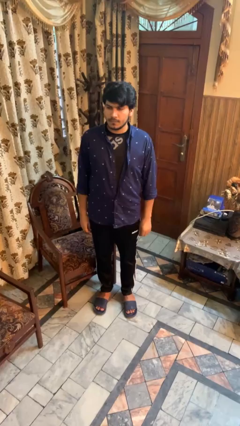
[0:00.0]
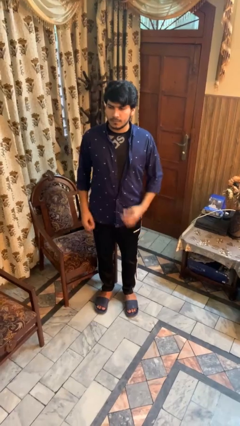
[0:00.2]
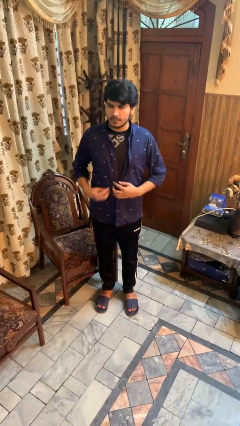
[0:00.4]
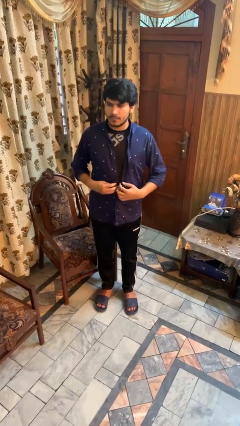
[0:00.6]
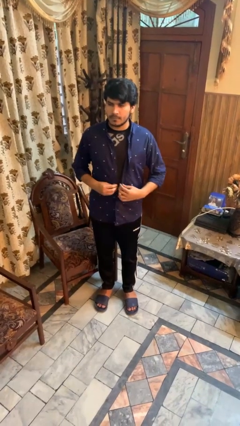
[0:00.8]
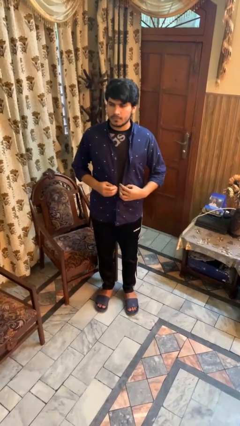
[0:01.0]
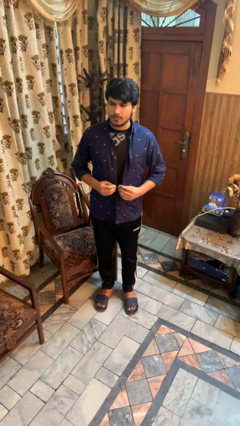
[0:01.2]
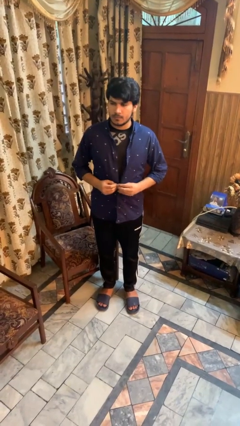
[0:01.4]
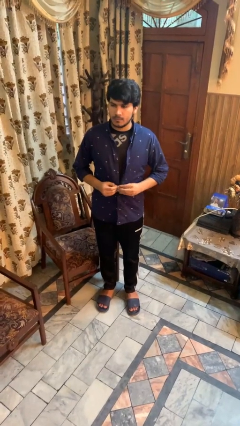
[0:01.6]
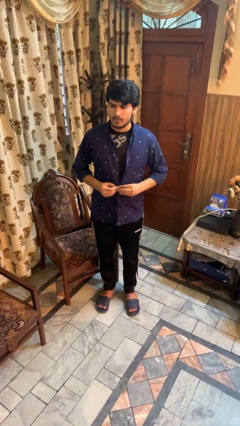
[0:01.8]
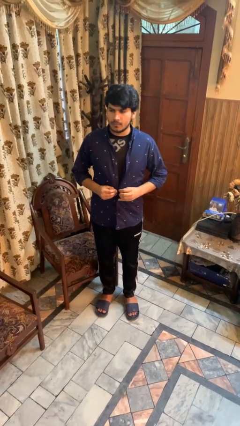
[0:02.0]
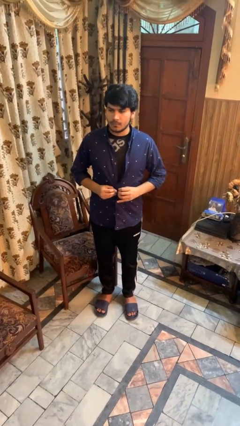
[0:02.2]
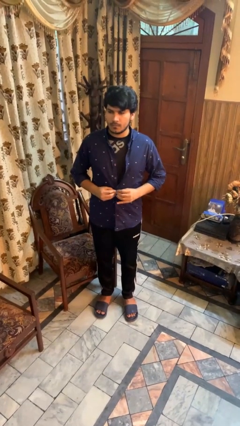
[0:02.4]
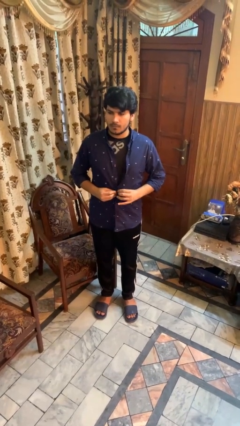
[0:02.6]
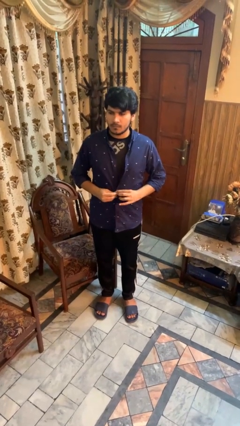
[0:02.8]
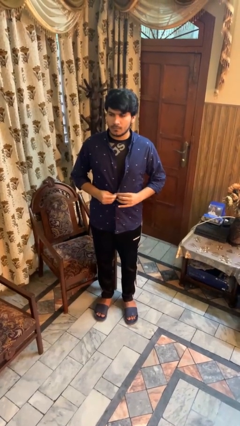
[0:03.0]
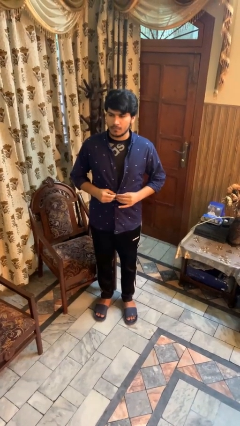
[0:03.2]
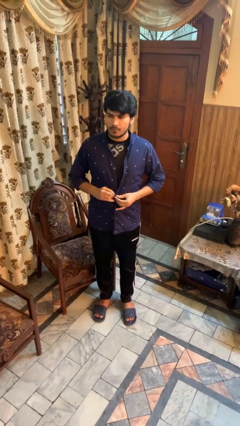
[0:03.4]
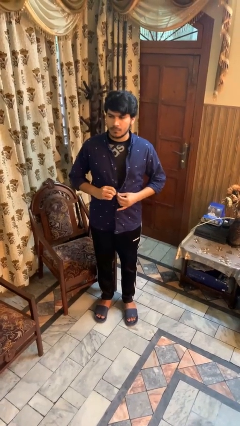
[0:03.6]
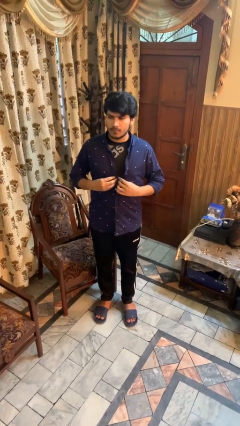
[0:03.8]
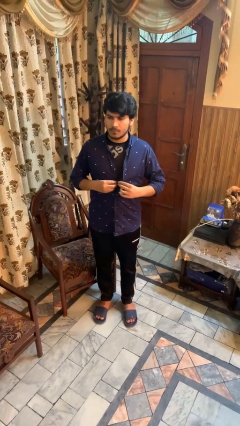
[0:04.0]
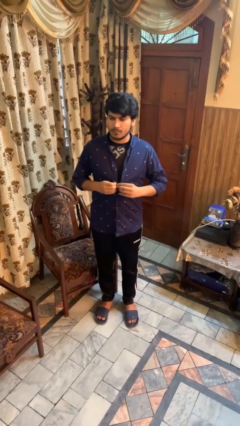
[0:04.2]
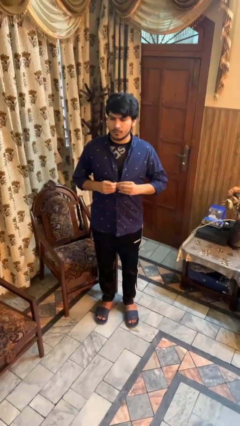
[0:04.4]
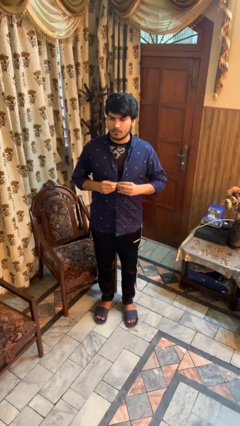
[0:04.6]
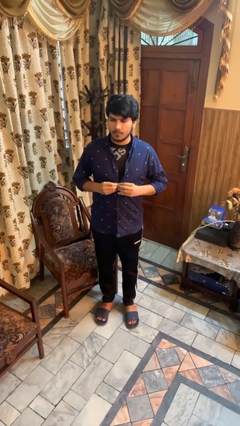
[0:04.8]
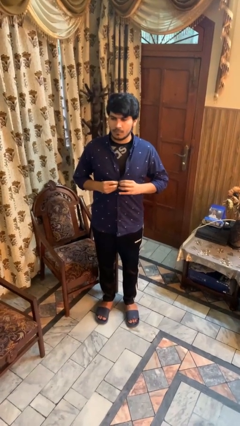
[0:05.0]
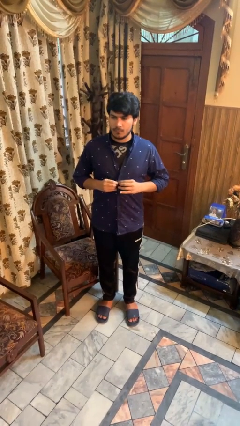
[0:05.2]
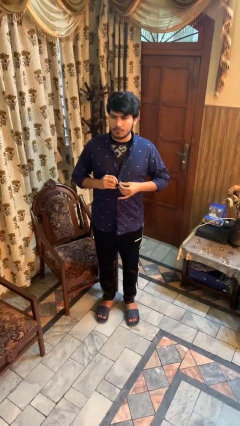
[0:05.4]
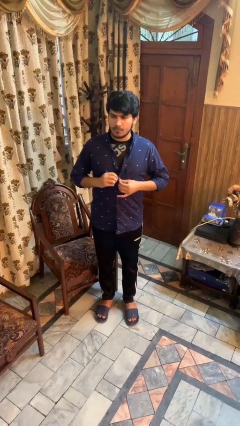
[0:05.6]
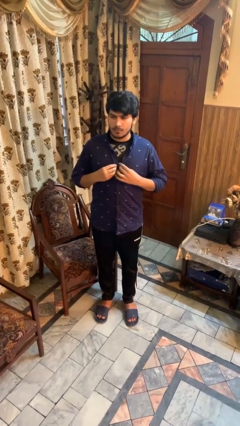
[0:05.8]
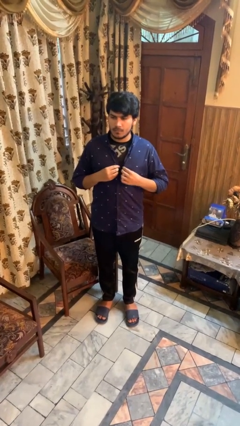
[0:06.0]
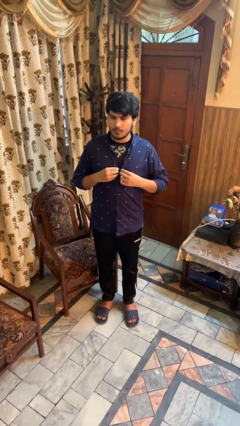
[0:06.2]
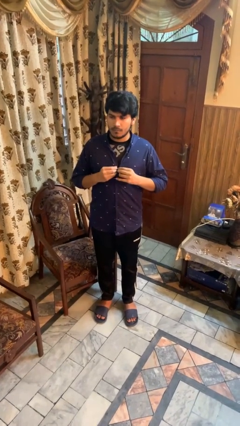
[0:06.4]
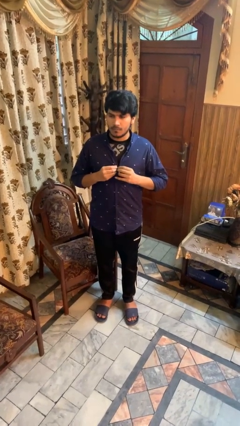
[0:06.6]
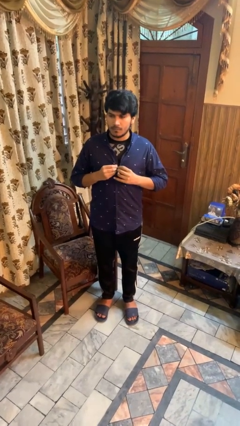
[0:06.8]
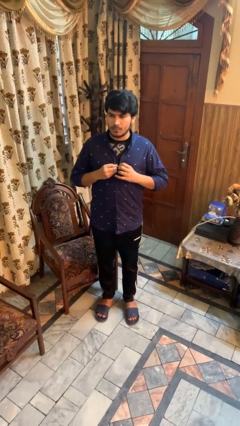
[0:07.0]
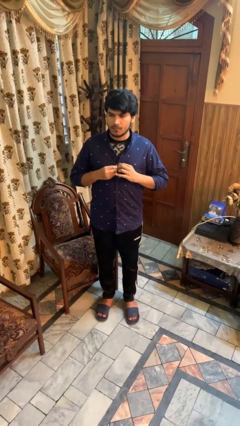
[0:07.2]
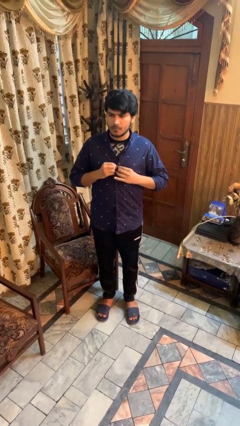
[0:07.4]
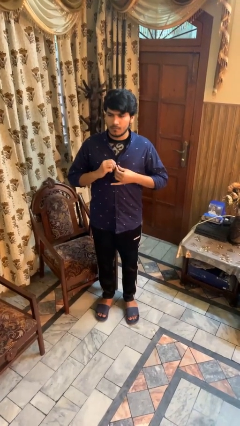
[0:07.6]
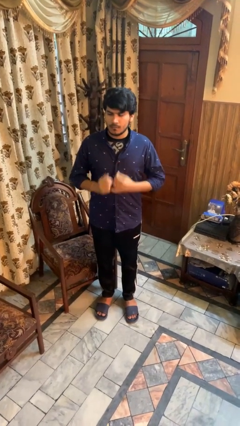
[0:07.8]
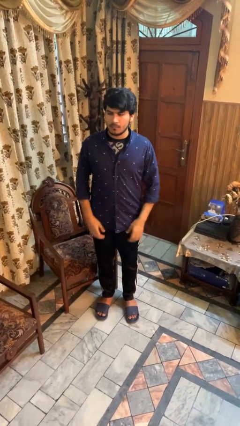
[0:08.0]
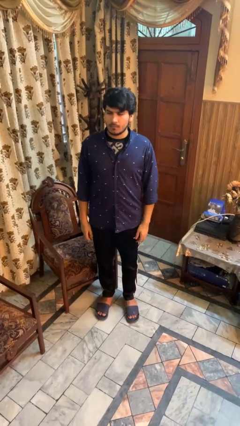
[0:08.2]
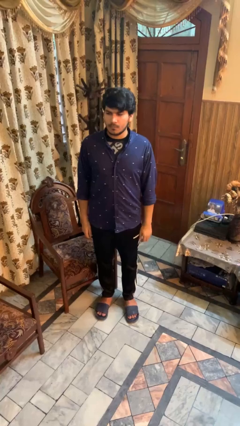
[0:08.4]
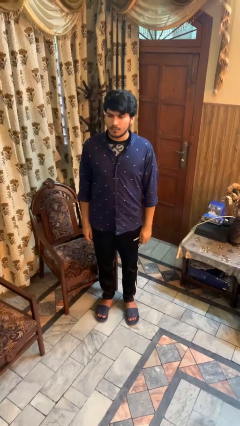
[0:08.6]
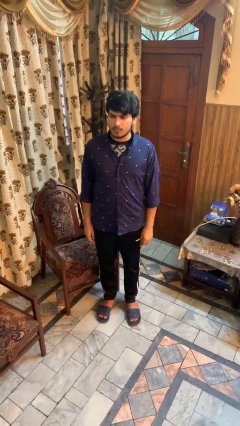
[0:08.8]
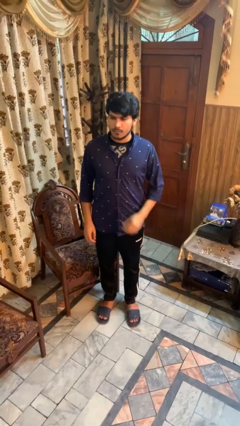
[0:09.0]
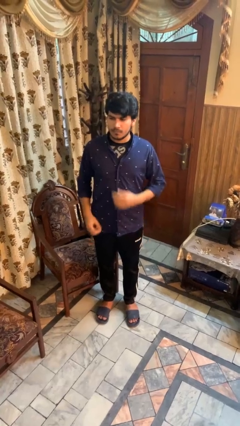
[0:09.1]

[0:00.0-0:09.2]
person buttons shirt

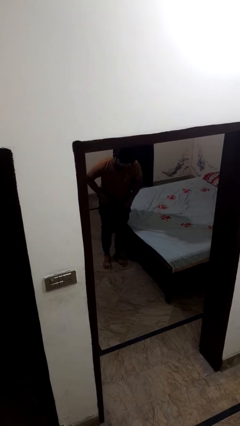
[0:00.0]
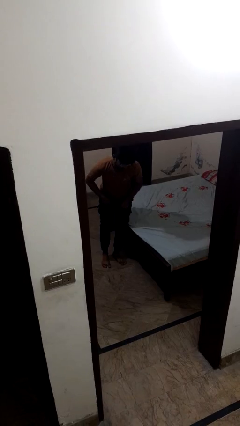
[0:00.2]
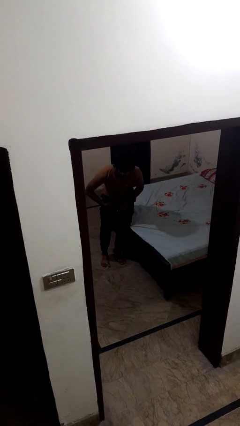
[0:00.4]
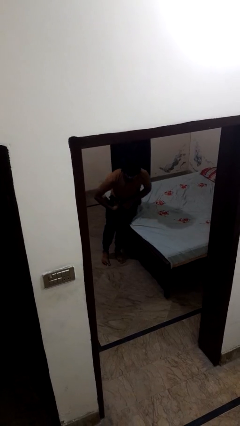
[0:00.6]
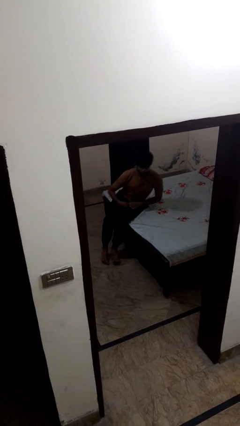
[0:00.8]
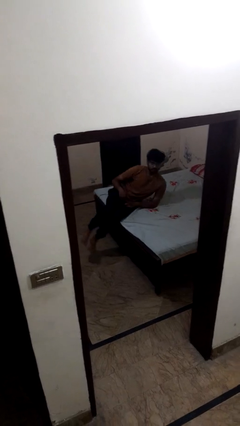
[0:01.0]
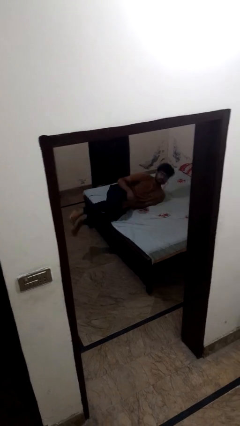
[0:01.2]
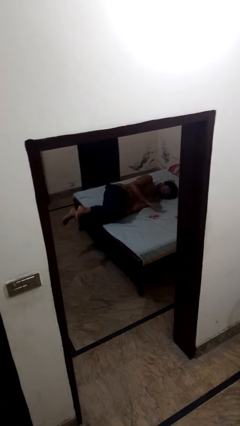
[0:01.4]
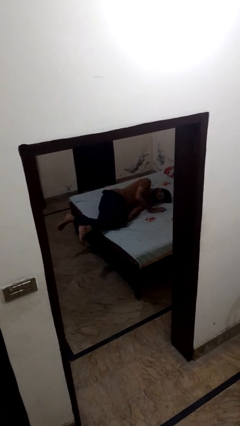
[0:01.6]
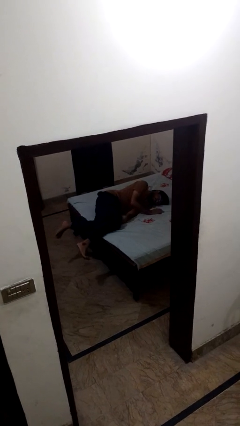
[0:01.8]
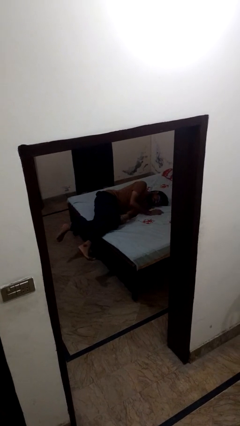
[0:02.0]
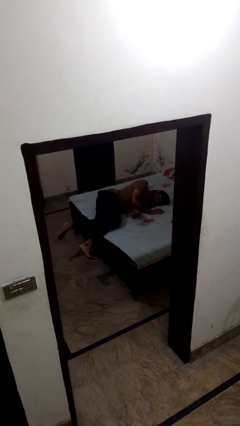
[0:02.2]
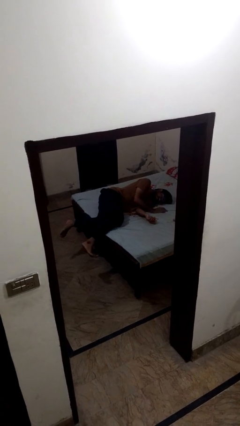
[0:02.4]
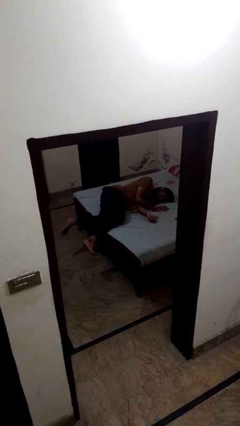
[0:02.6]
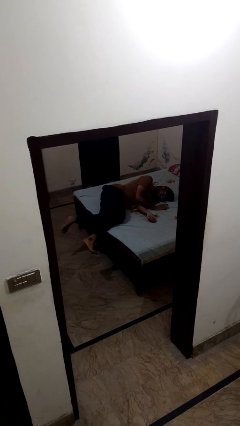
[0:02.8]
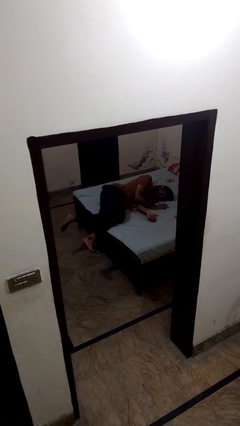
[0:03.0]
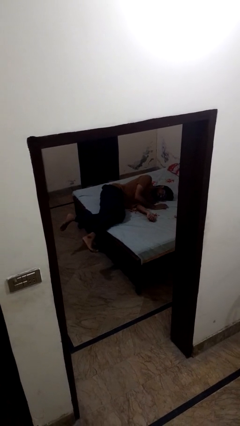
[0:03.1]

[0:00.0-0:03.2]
person lies down on bed

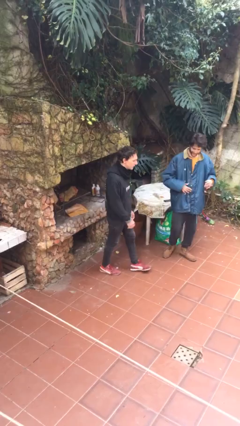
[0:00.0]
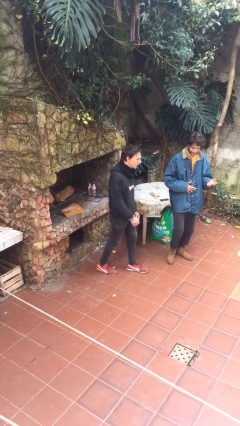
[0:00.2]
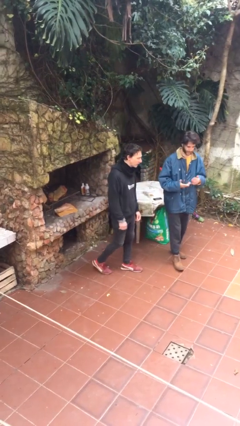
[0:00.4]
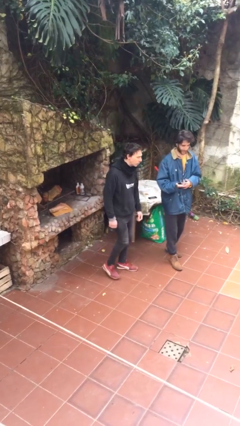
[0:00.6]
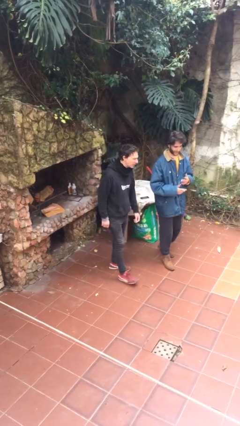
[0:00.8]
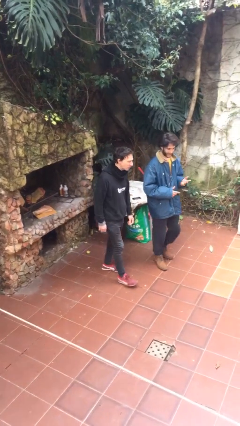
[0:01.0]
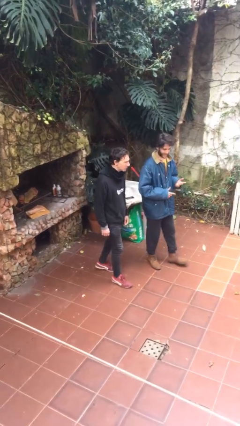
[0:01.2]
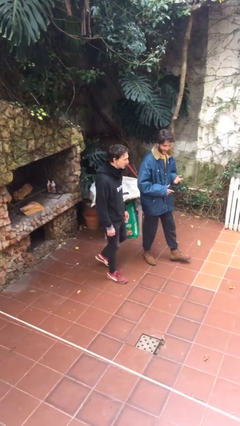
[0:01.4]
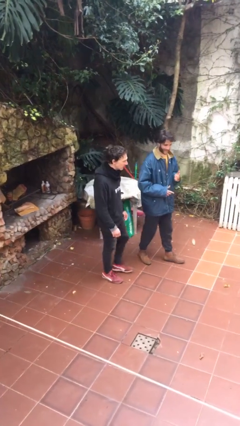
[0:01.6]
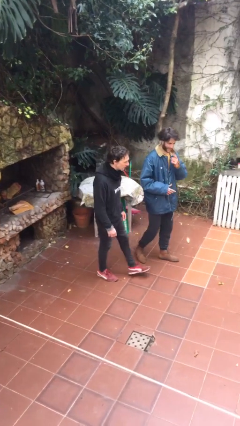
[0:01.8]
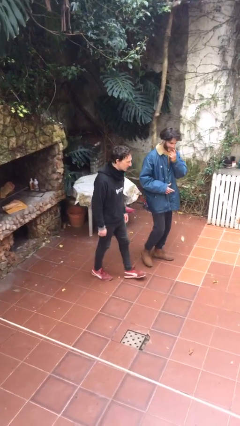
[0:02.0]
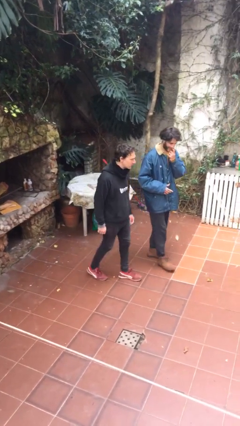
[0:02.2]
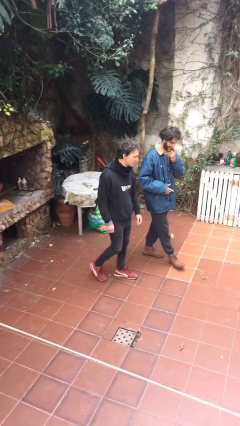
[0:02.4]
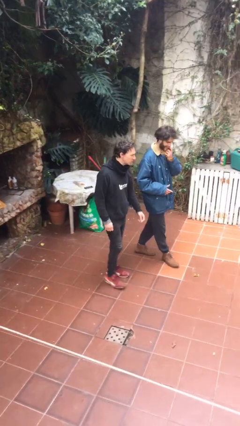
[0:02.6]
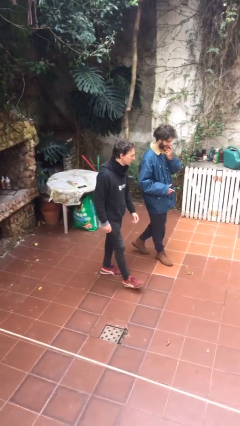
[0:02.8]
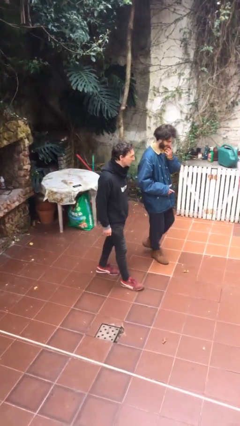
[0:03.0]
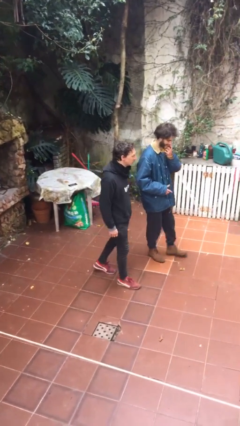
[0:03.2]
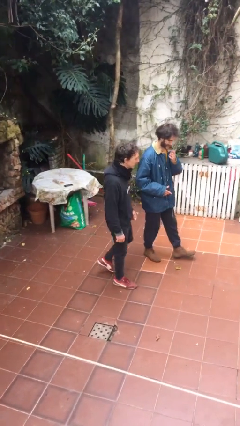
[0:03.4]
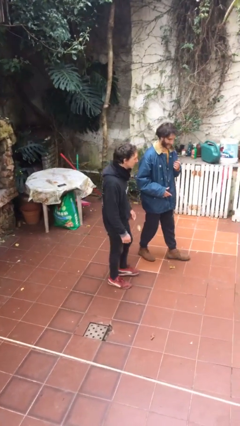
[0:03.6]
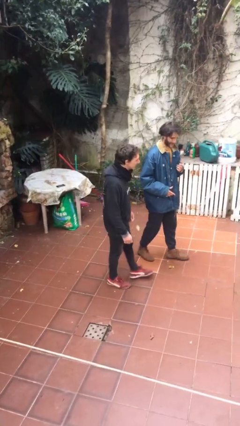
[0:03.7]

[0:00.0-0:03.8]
person talks to person

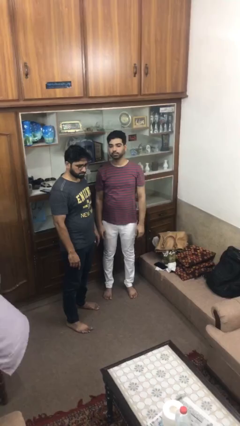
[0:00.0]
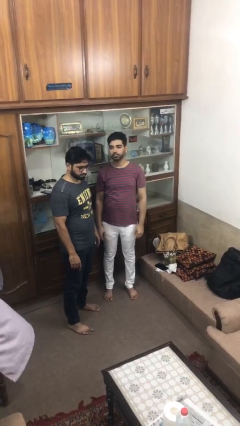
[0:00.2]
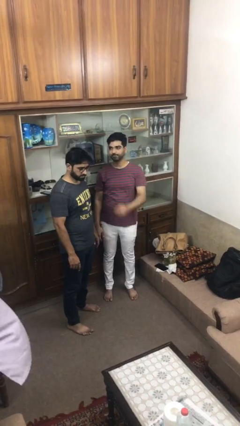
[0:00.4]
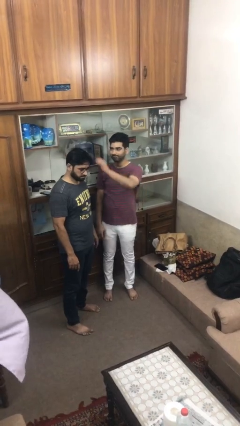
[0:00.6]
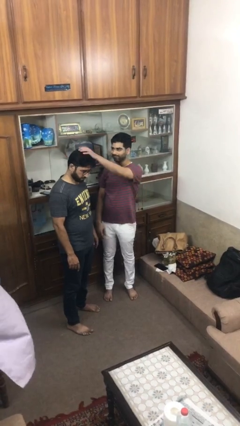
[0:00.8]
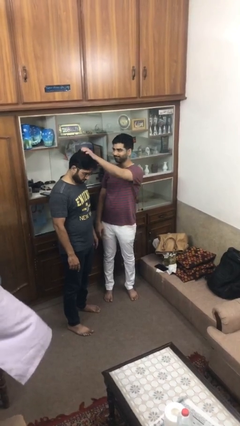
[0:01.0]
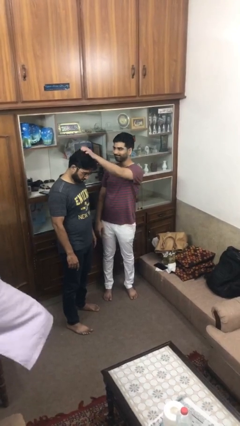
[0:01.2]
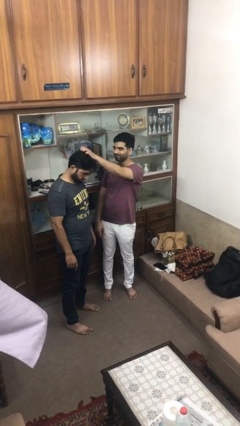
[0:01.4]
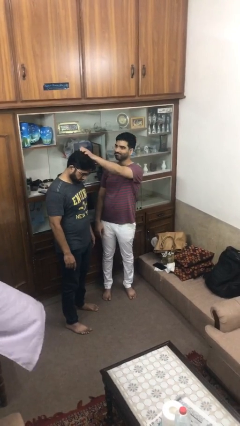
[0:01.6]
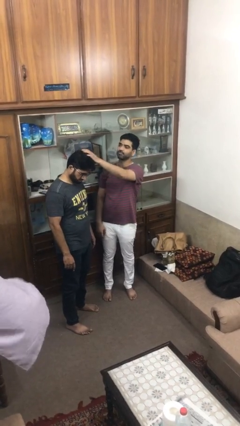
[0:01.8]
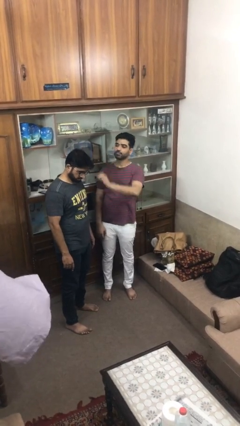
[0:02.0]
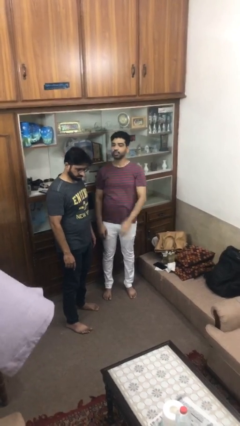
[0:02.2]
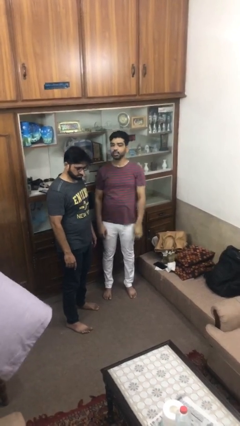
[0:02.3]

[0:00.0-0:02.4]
person grabs person by hair
